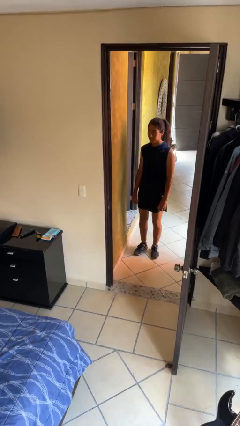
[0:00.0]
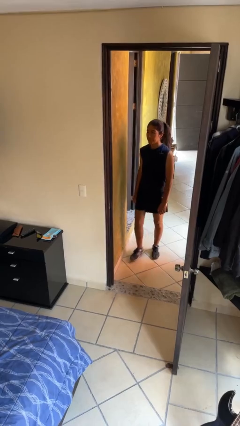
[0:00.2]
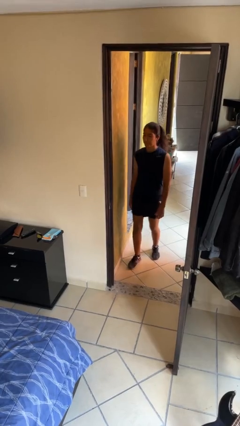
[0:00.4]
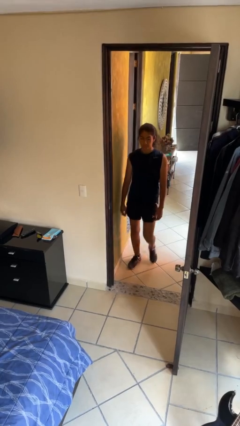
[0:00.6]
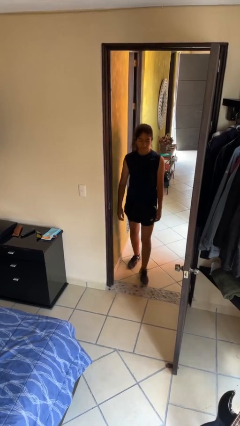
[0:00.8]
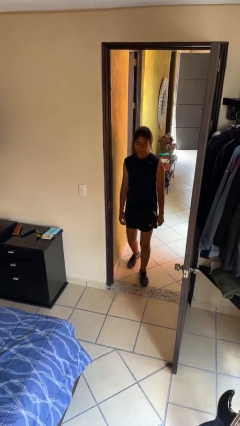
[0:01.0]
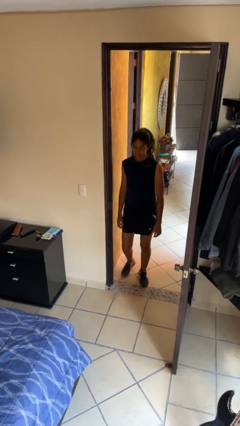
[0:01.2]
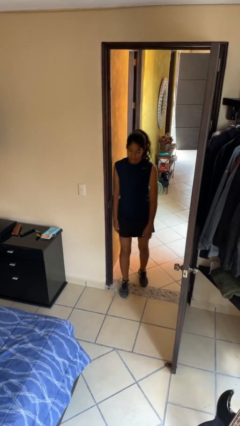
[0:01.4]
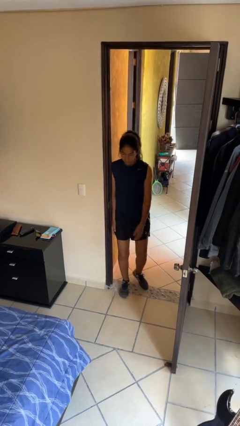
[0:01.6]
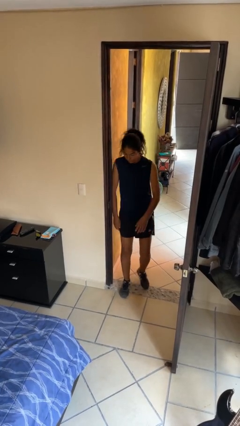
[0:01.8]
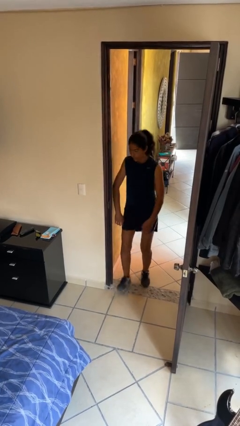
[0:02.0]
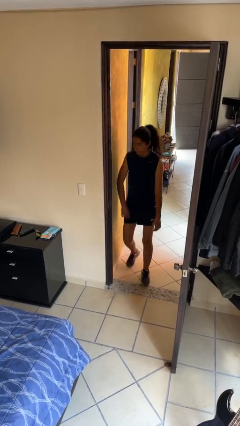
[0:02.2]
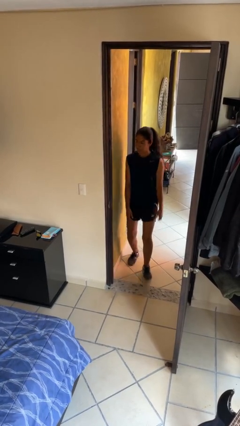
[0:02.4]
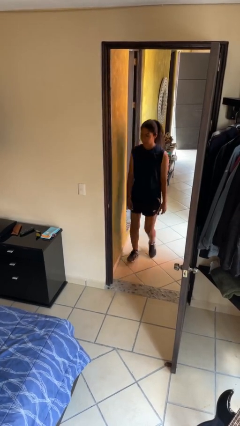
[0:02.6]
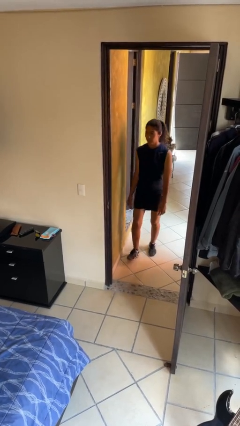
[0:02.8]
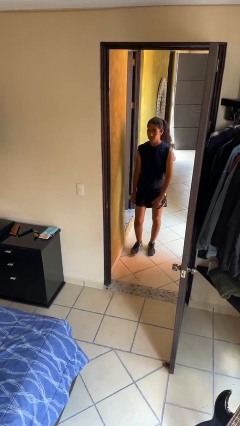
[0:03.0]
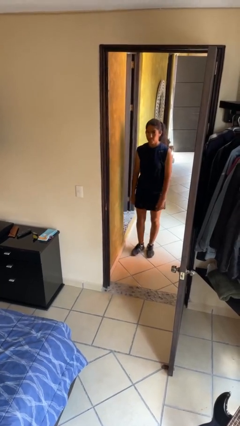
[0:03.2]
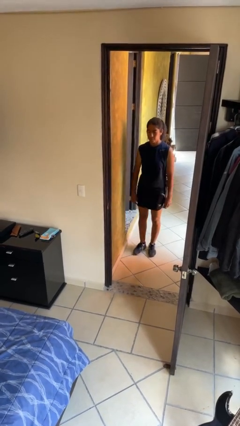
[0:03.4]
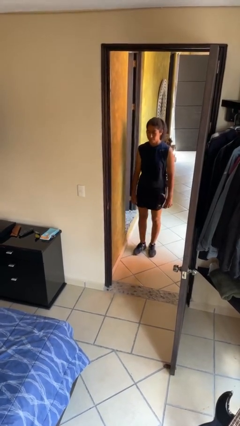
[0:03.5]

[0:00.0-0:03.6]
person bumps into wall

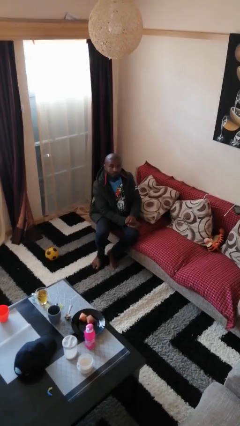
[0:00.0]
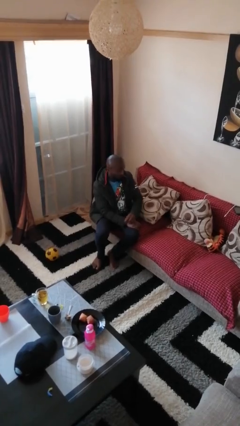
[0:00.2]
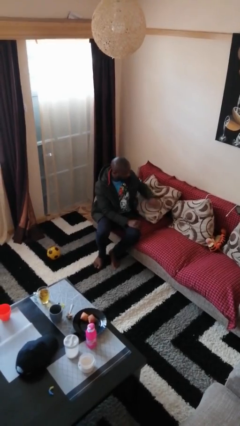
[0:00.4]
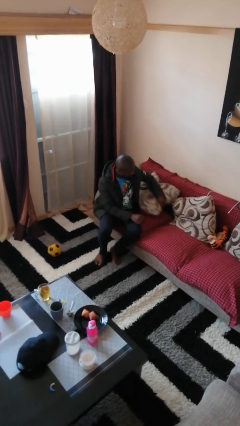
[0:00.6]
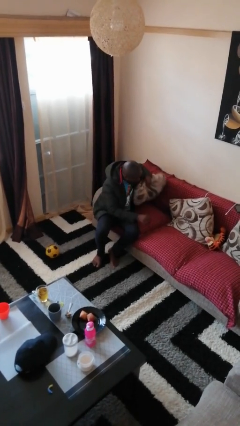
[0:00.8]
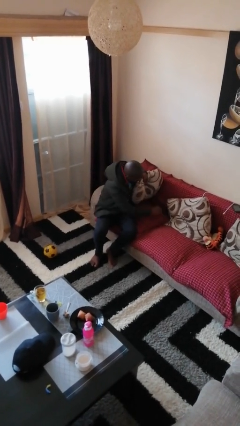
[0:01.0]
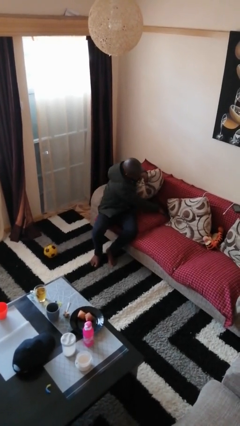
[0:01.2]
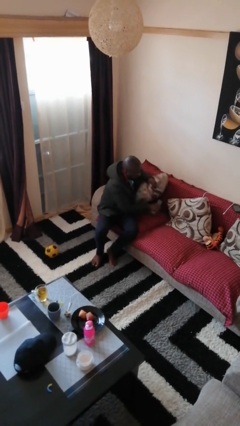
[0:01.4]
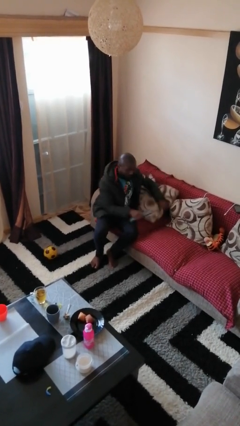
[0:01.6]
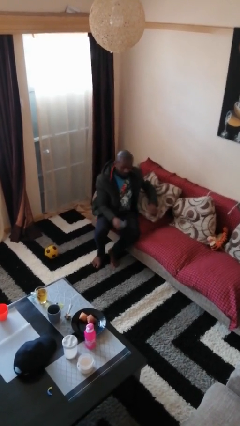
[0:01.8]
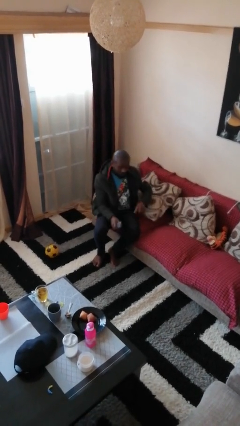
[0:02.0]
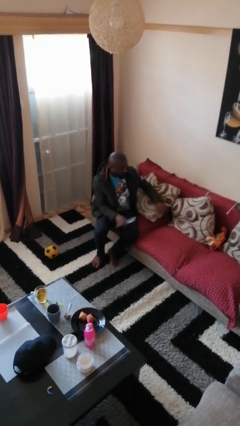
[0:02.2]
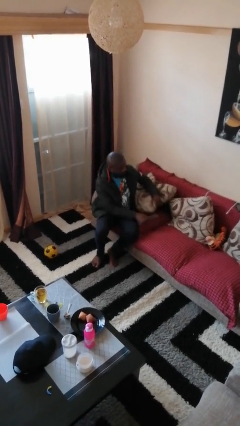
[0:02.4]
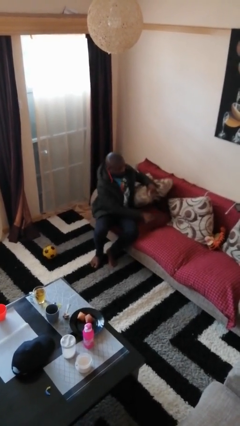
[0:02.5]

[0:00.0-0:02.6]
person searches in couch

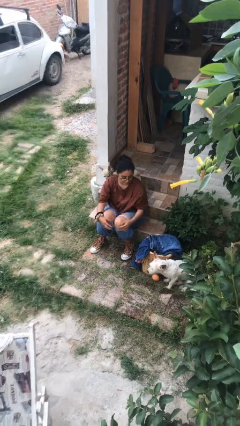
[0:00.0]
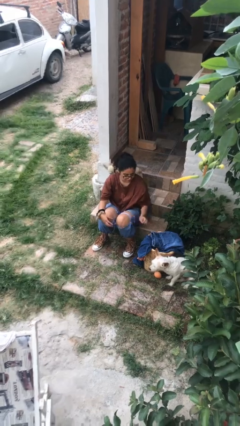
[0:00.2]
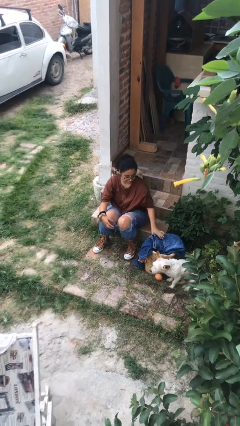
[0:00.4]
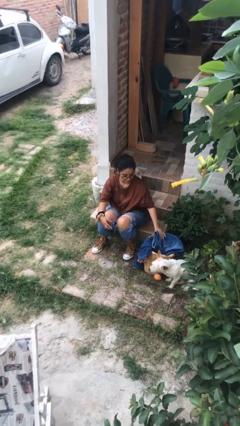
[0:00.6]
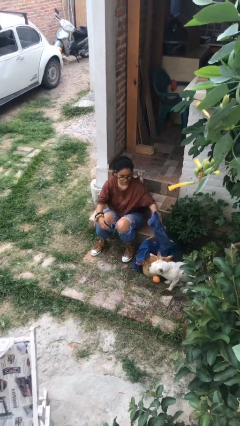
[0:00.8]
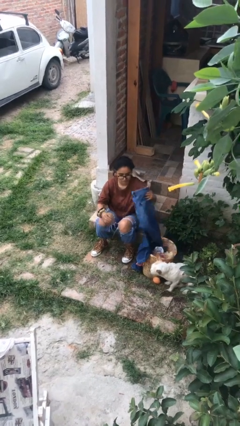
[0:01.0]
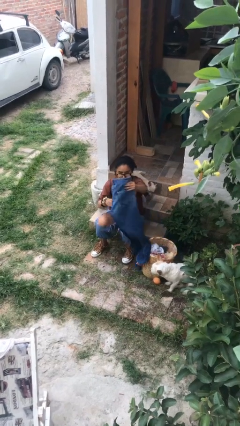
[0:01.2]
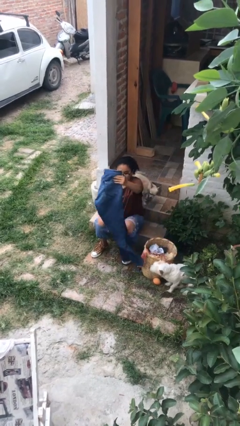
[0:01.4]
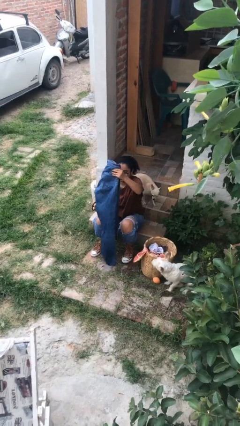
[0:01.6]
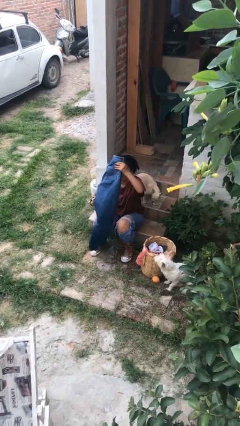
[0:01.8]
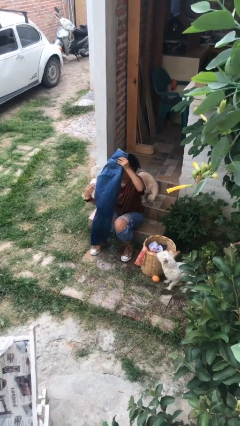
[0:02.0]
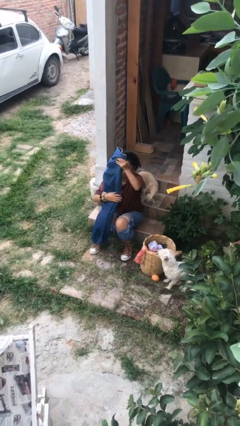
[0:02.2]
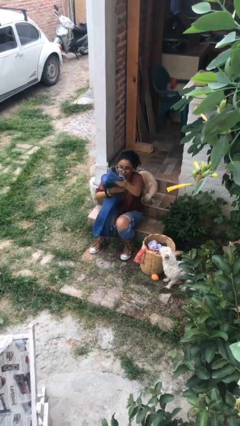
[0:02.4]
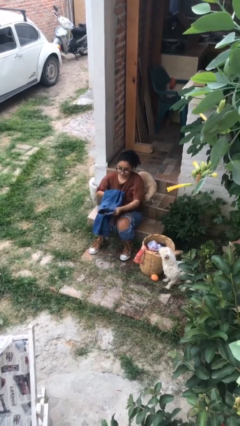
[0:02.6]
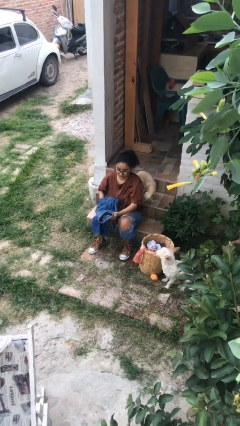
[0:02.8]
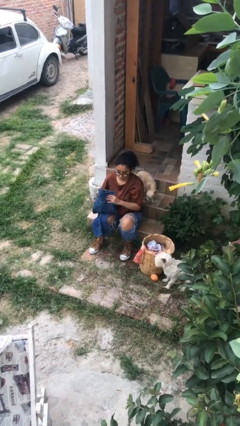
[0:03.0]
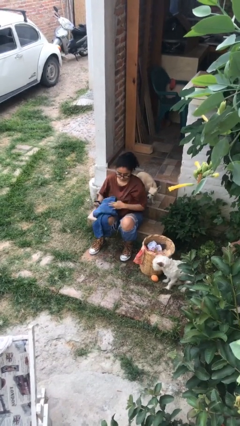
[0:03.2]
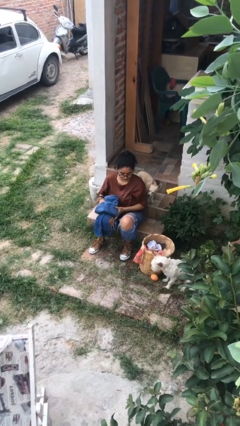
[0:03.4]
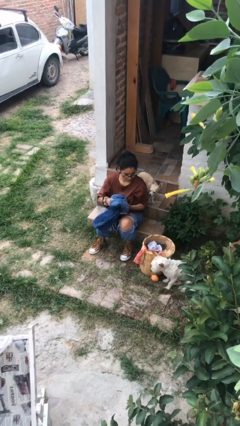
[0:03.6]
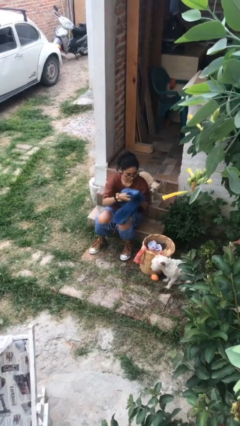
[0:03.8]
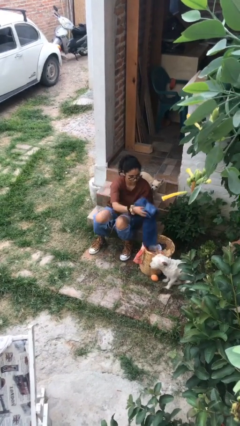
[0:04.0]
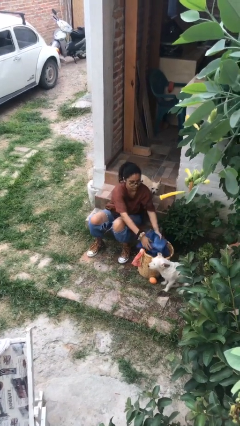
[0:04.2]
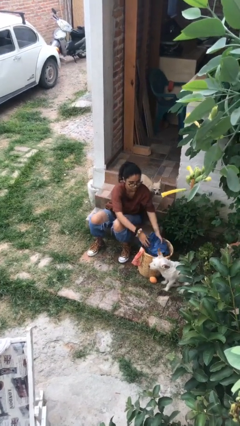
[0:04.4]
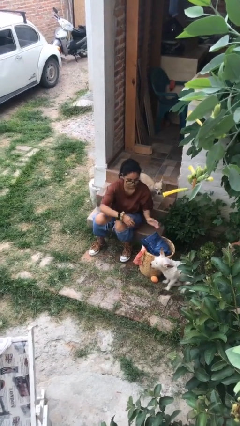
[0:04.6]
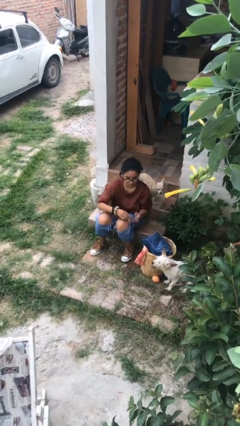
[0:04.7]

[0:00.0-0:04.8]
person folds pants

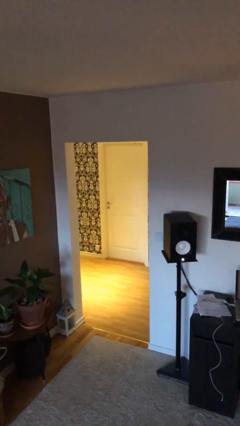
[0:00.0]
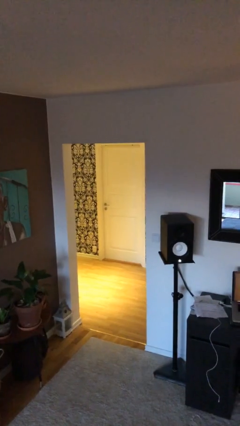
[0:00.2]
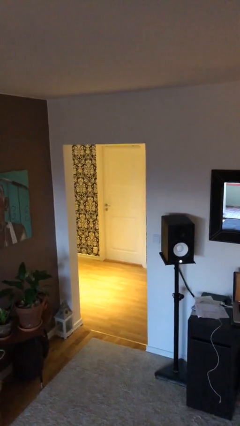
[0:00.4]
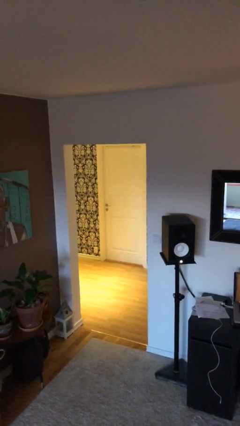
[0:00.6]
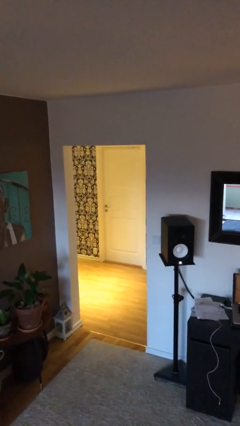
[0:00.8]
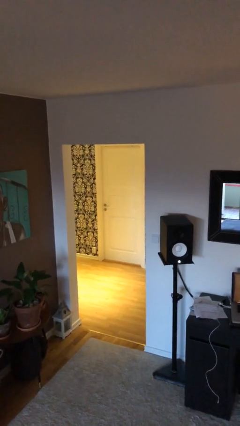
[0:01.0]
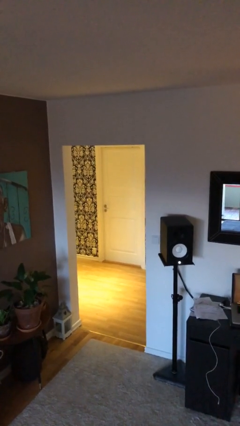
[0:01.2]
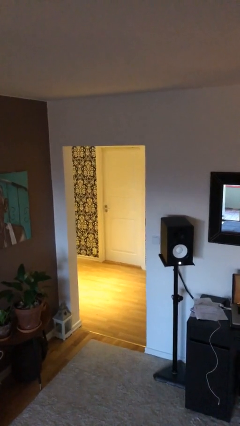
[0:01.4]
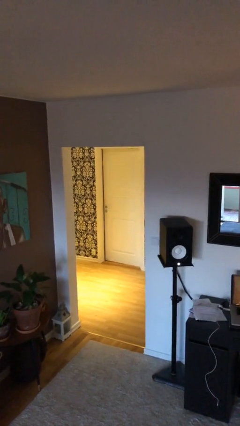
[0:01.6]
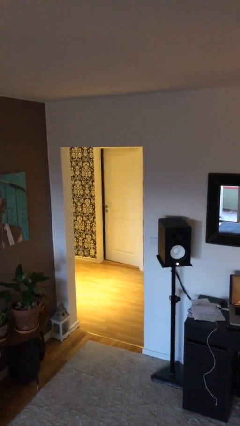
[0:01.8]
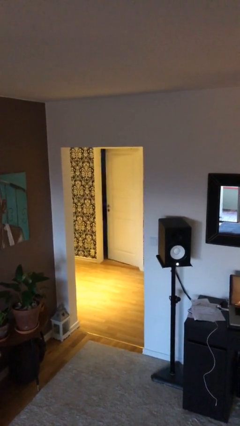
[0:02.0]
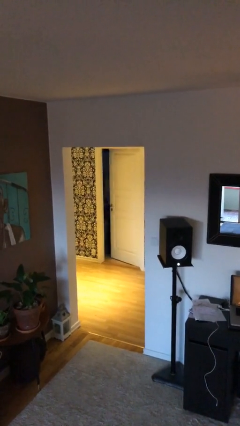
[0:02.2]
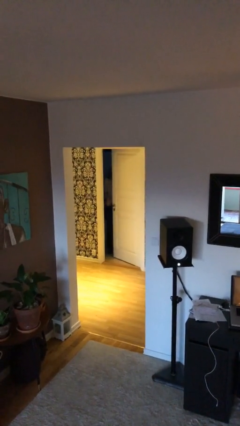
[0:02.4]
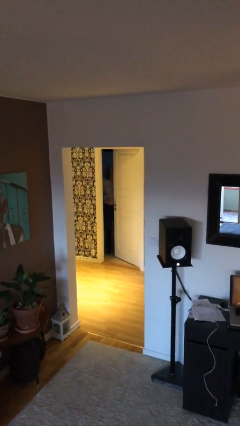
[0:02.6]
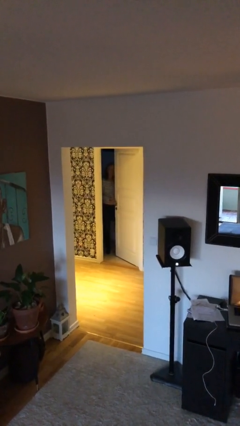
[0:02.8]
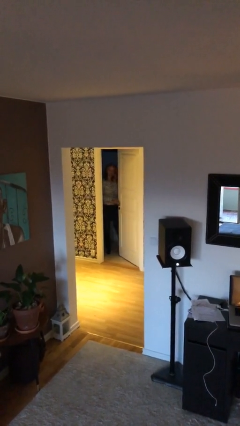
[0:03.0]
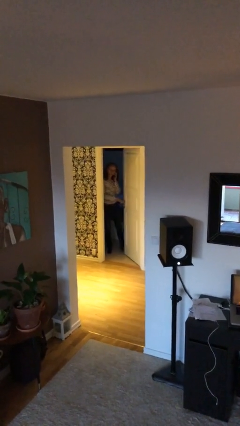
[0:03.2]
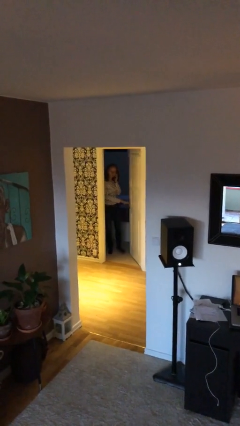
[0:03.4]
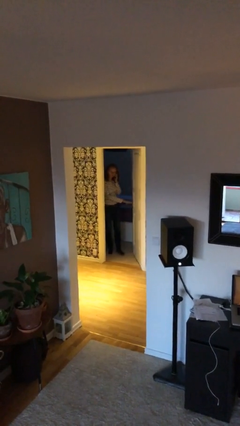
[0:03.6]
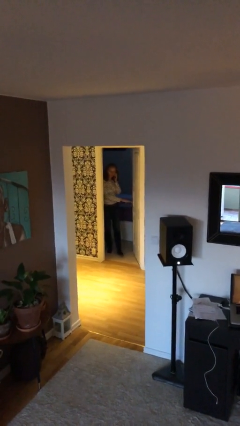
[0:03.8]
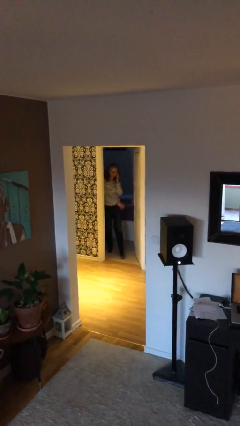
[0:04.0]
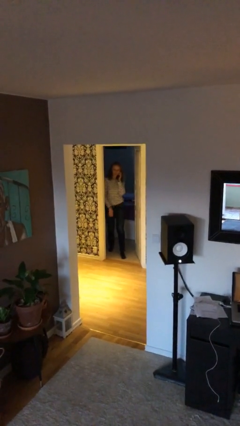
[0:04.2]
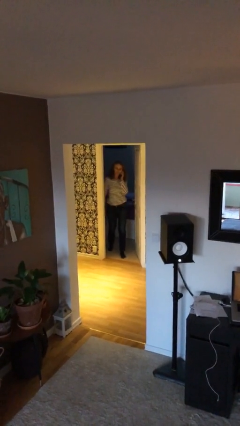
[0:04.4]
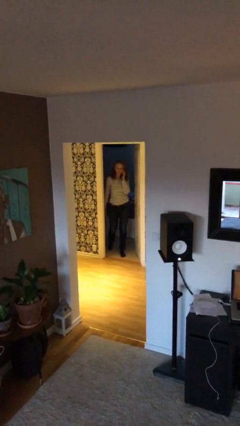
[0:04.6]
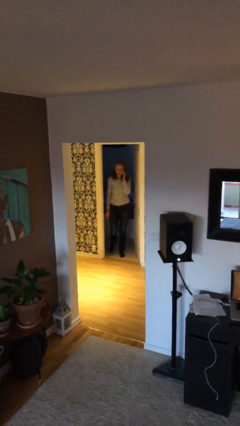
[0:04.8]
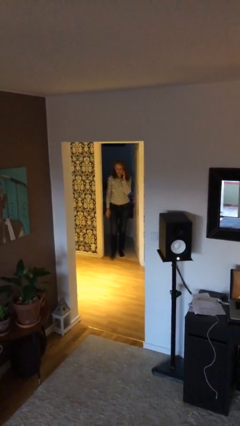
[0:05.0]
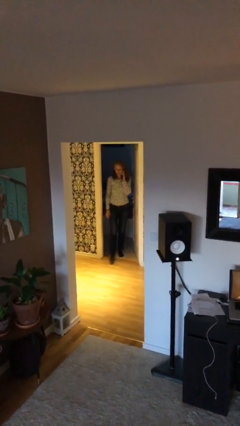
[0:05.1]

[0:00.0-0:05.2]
person opens facility door

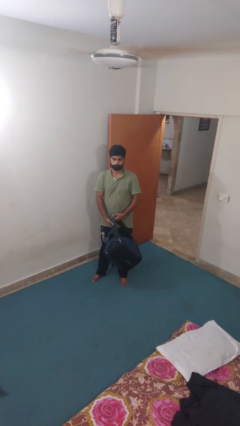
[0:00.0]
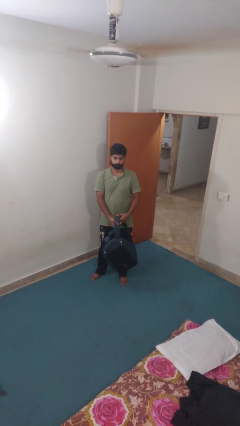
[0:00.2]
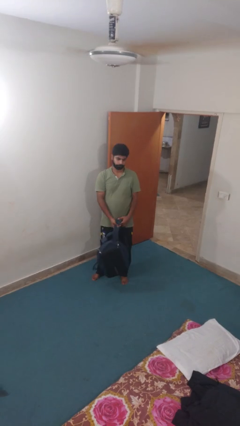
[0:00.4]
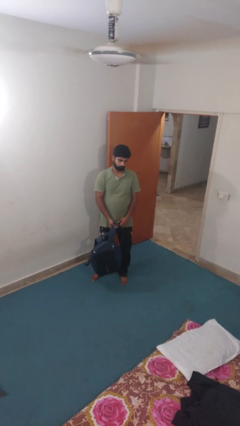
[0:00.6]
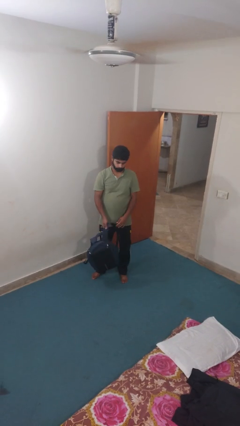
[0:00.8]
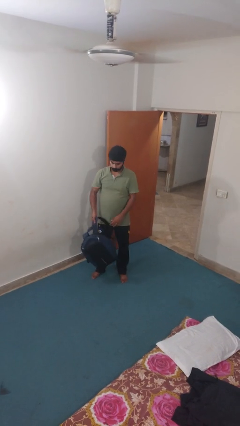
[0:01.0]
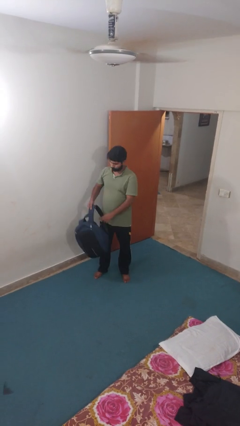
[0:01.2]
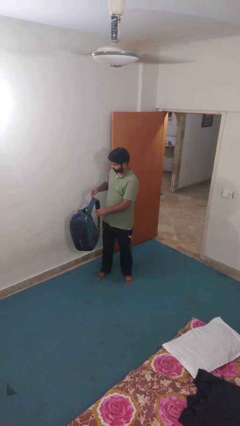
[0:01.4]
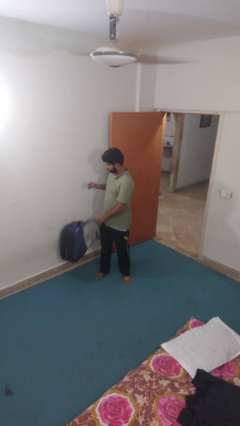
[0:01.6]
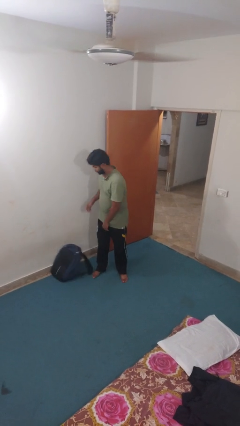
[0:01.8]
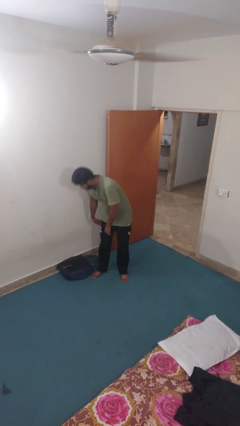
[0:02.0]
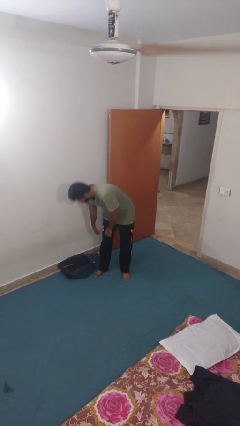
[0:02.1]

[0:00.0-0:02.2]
person drops object
